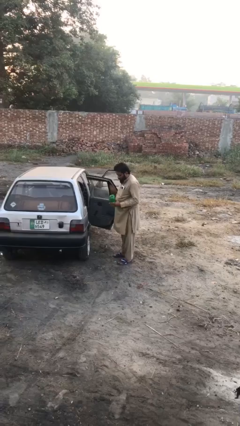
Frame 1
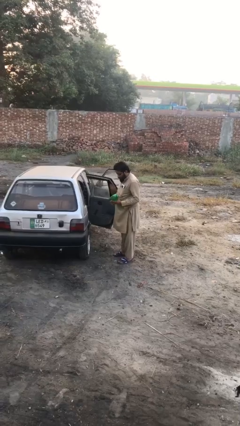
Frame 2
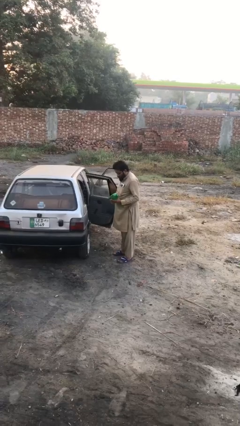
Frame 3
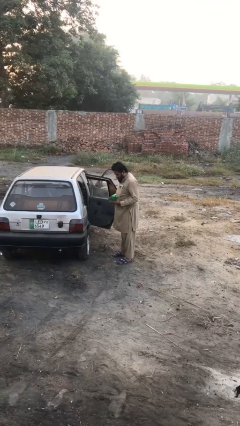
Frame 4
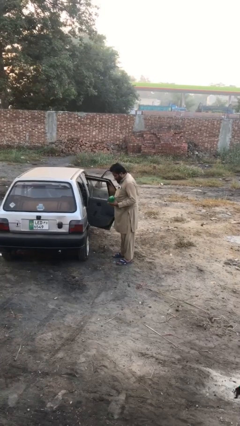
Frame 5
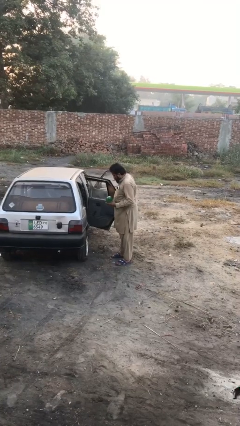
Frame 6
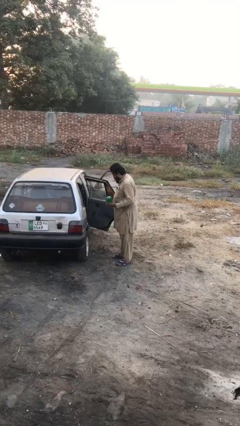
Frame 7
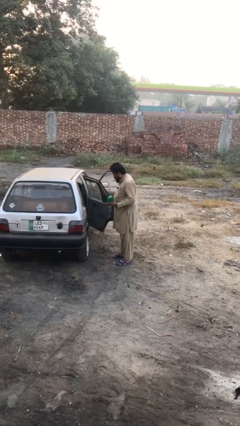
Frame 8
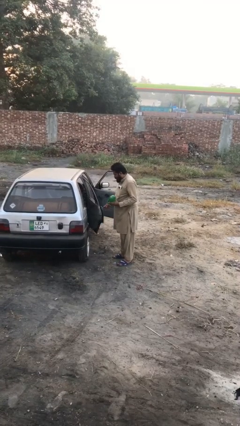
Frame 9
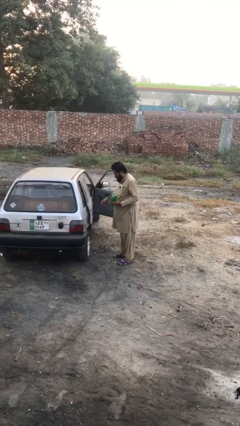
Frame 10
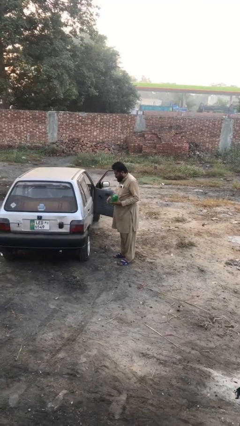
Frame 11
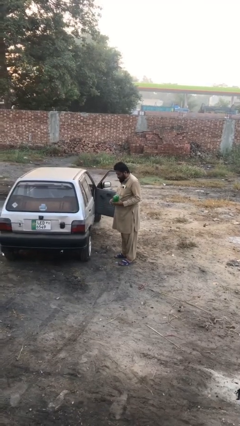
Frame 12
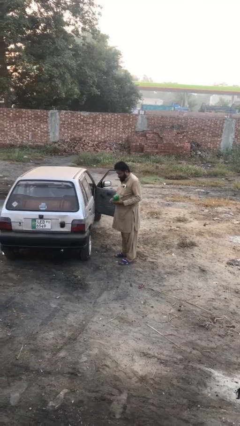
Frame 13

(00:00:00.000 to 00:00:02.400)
person closes car door

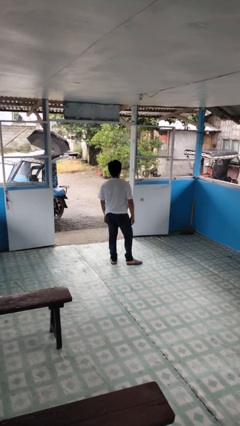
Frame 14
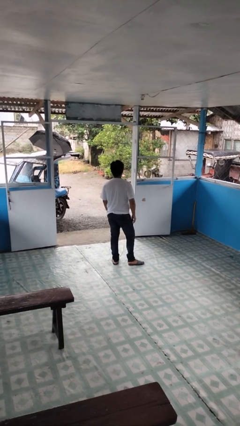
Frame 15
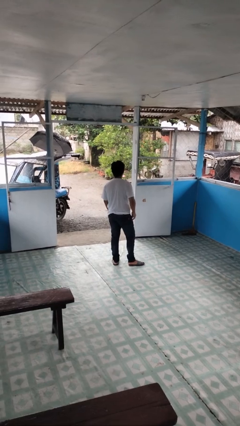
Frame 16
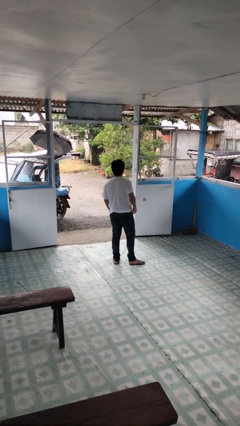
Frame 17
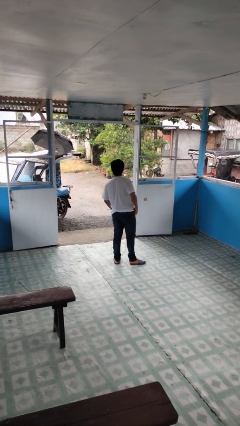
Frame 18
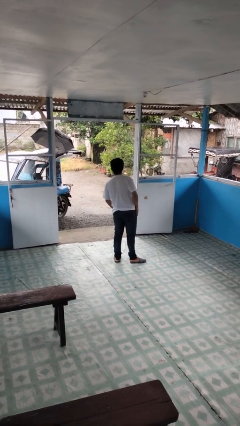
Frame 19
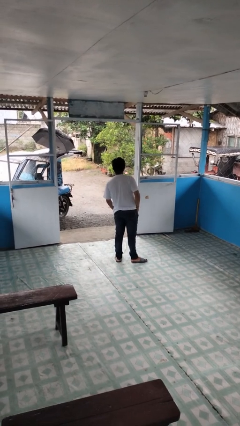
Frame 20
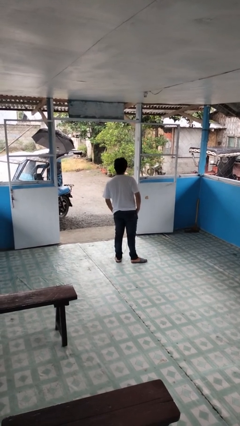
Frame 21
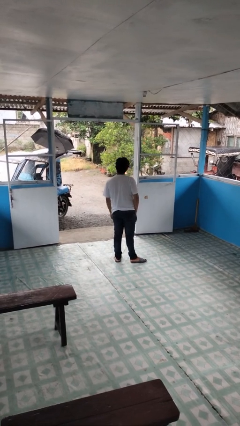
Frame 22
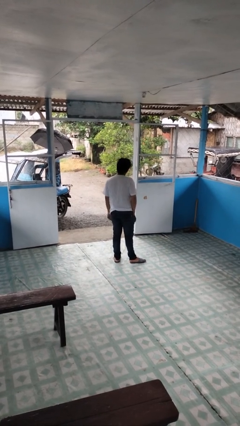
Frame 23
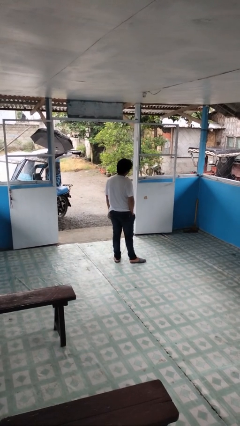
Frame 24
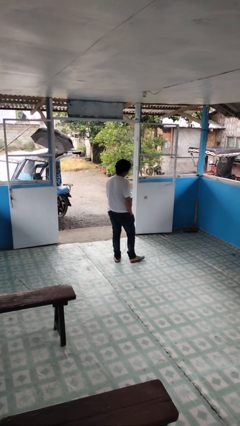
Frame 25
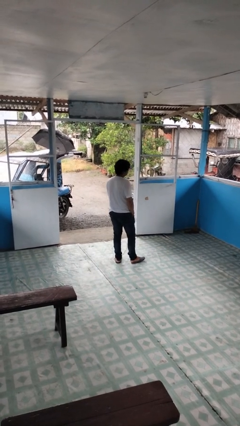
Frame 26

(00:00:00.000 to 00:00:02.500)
person puts hands in back pockets

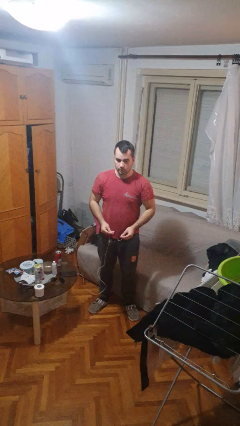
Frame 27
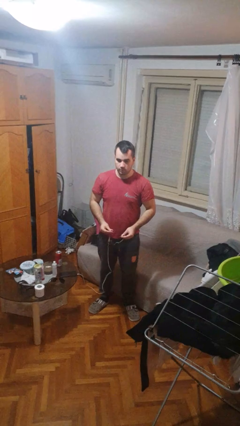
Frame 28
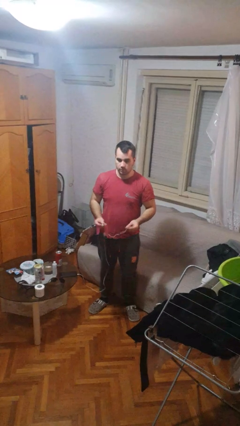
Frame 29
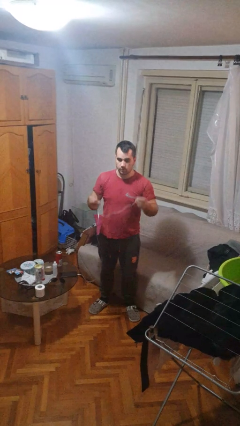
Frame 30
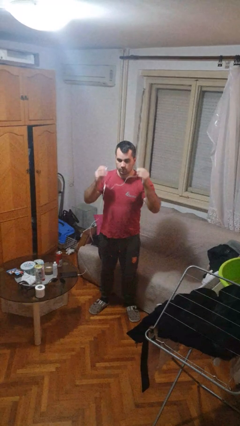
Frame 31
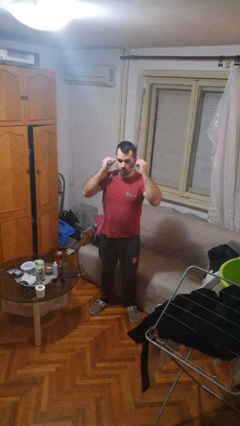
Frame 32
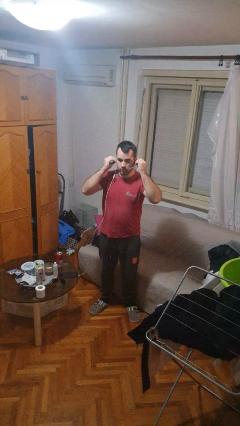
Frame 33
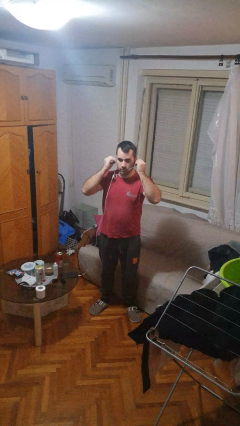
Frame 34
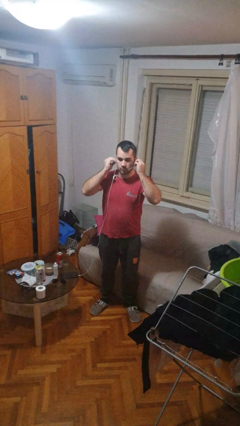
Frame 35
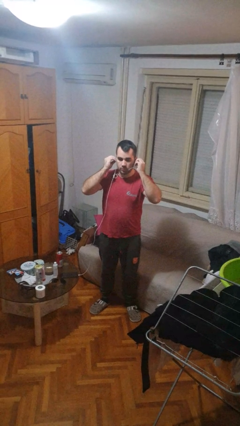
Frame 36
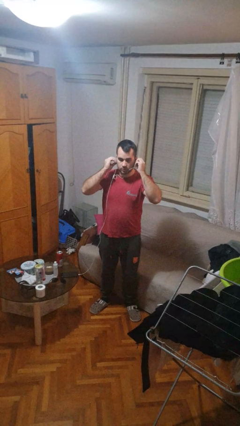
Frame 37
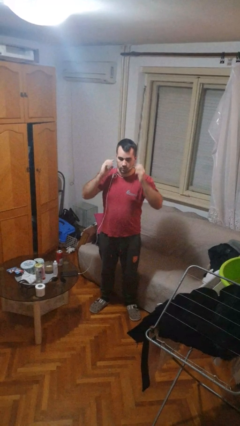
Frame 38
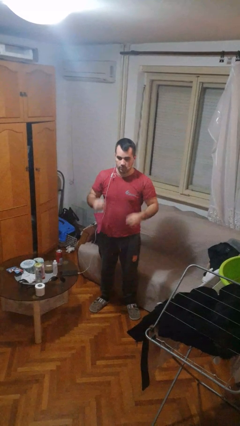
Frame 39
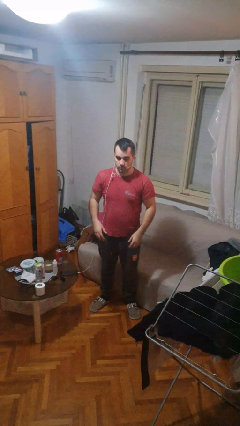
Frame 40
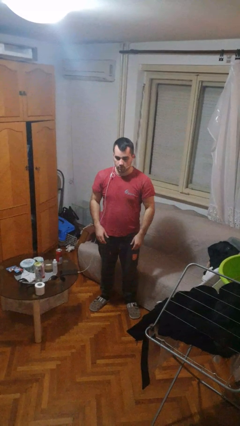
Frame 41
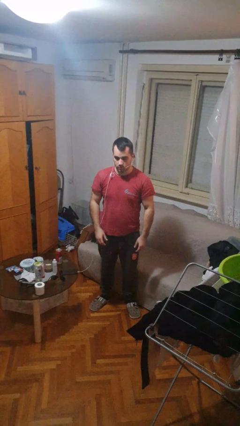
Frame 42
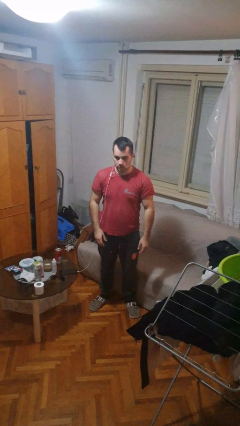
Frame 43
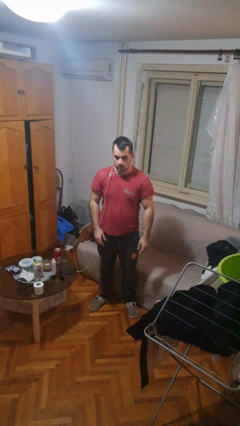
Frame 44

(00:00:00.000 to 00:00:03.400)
person puts on headphones

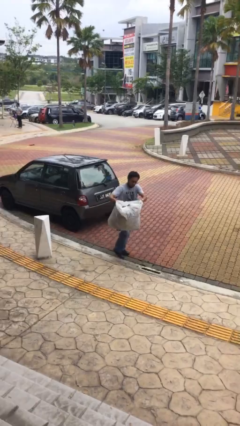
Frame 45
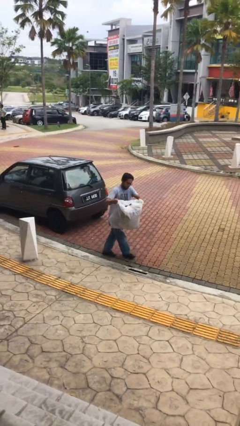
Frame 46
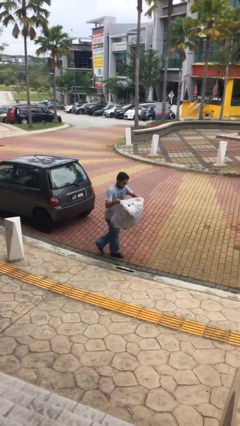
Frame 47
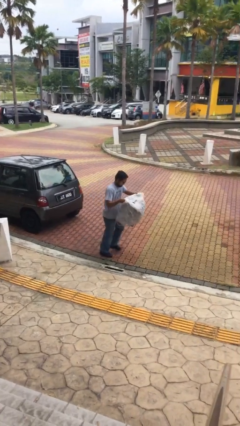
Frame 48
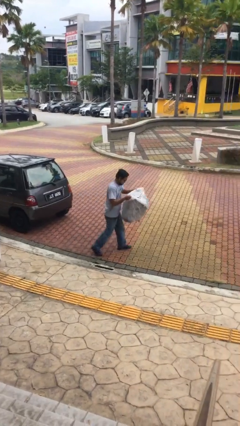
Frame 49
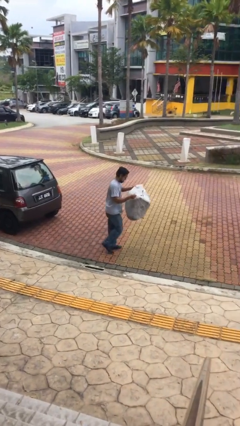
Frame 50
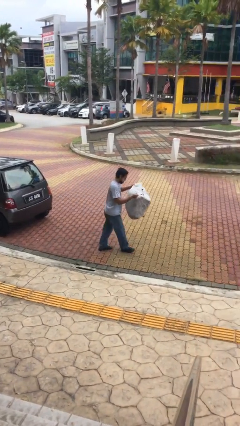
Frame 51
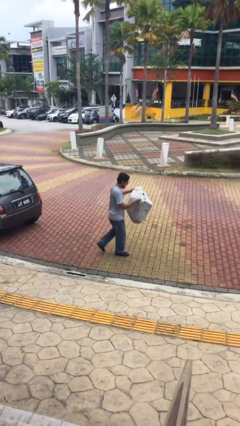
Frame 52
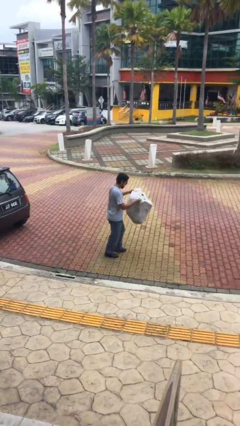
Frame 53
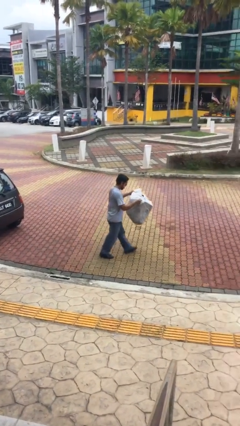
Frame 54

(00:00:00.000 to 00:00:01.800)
person carries heavy object

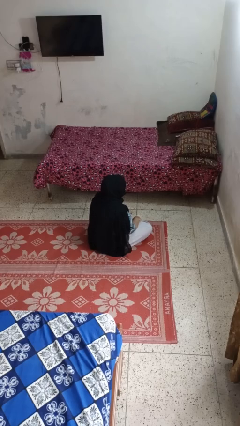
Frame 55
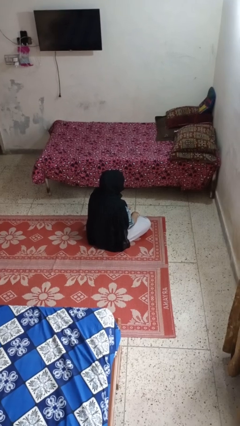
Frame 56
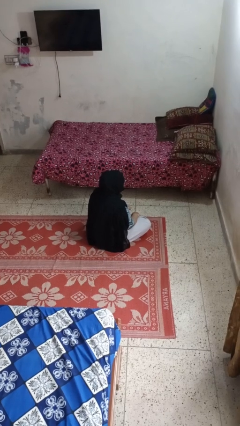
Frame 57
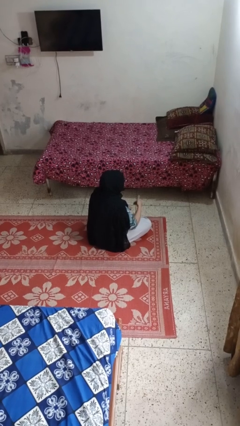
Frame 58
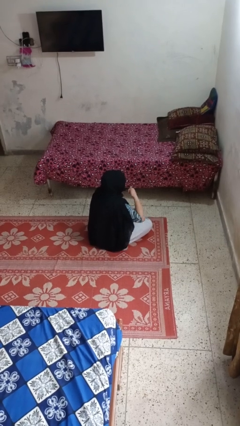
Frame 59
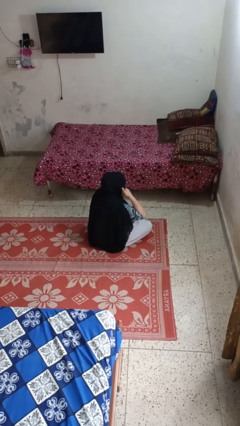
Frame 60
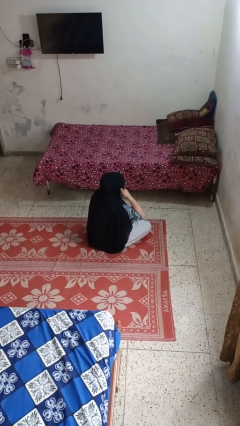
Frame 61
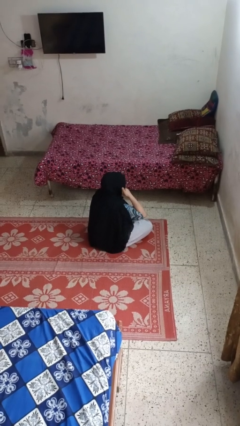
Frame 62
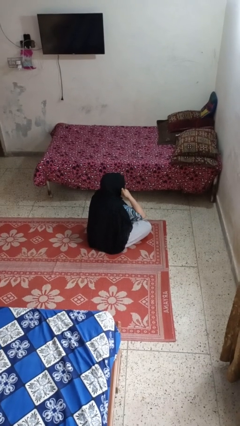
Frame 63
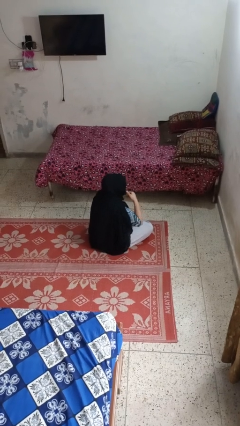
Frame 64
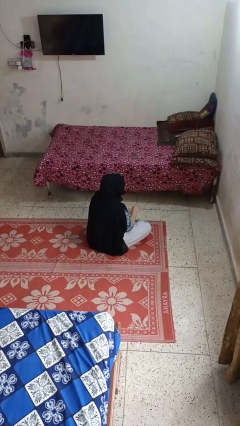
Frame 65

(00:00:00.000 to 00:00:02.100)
person gestures call me

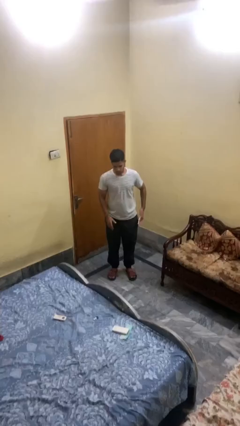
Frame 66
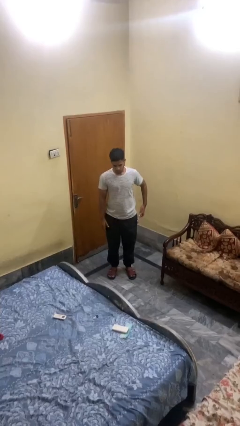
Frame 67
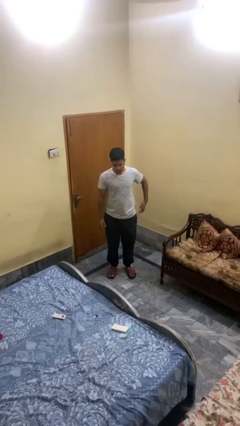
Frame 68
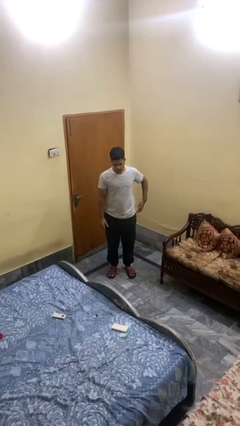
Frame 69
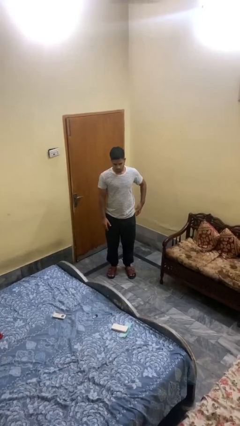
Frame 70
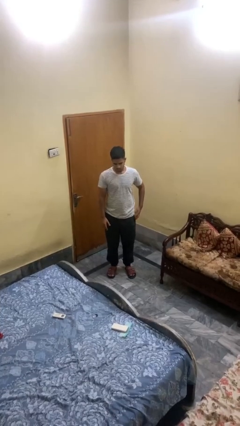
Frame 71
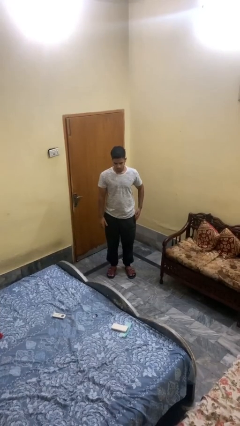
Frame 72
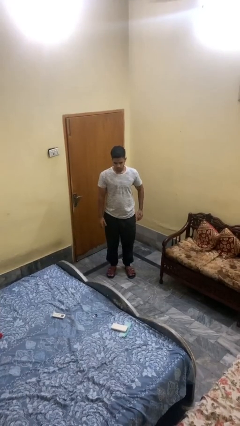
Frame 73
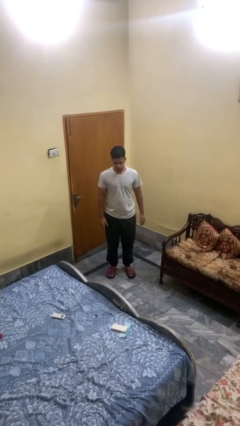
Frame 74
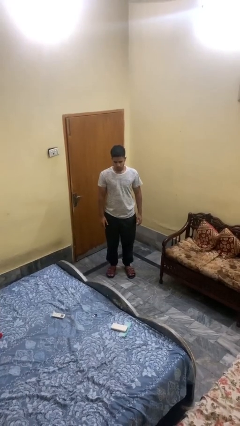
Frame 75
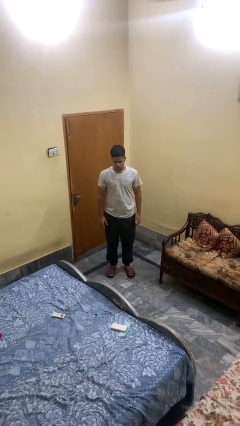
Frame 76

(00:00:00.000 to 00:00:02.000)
person puts phone into pocket

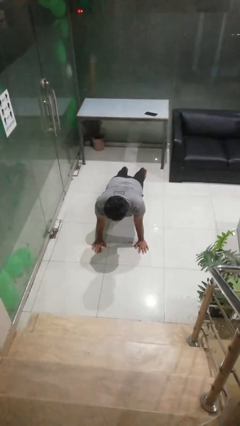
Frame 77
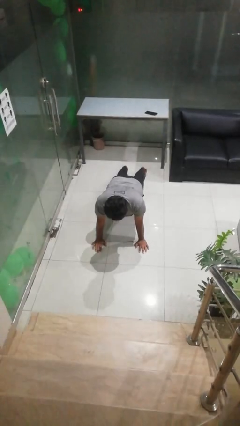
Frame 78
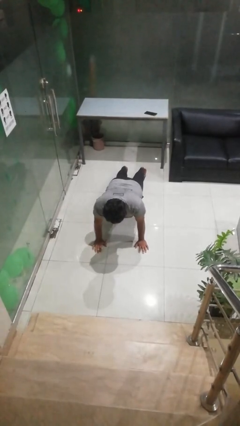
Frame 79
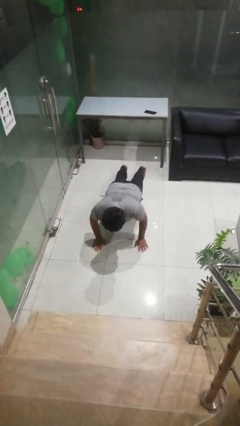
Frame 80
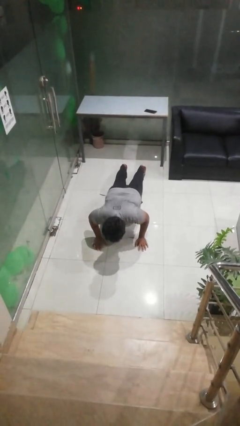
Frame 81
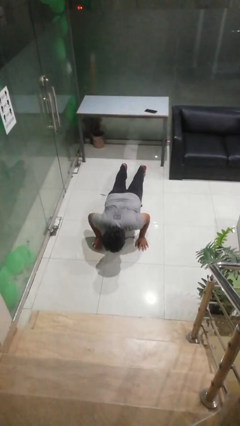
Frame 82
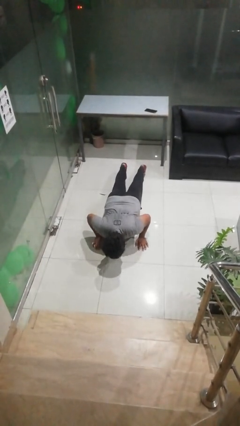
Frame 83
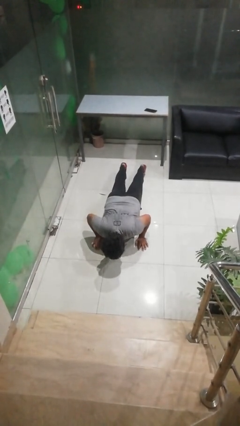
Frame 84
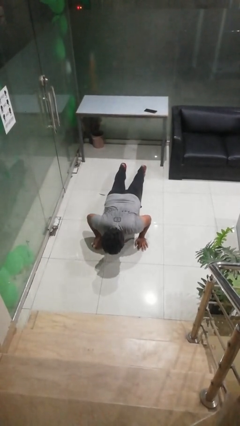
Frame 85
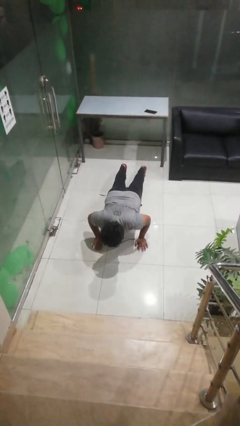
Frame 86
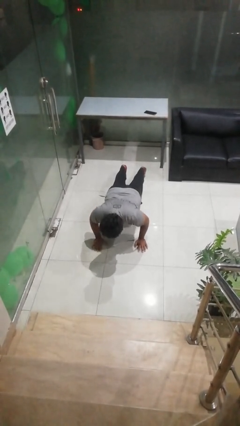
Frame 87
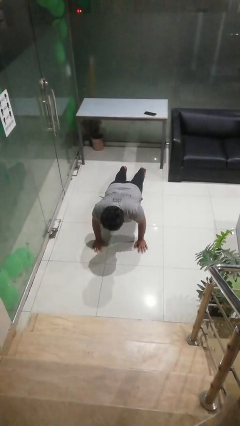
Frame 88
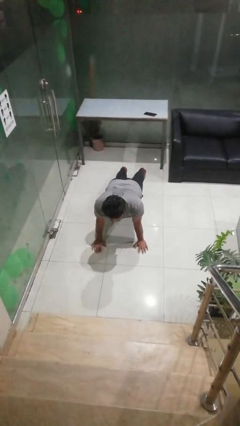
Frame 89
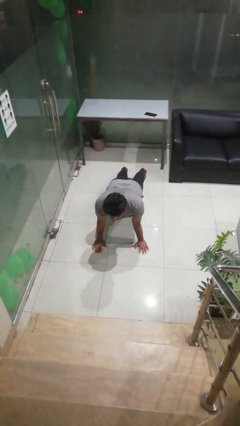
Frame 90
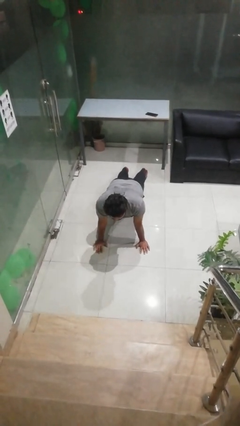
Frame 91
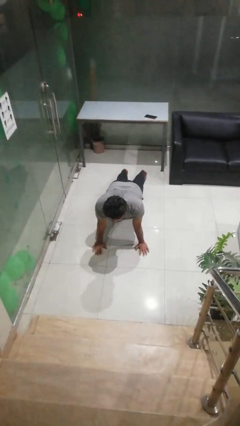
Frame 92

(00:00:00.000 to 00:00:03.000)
person exercises with pushup

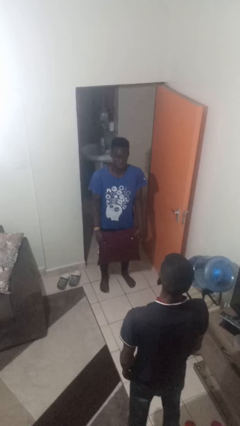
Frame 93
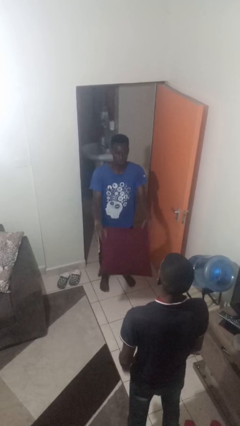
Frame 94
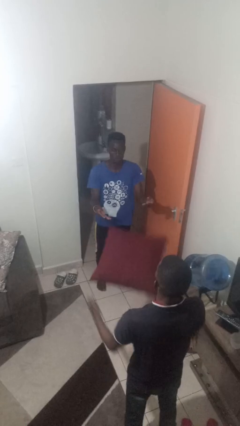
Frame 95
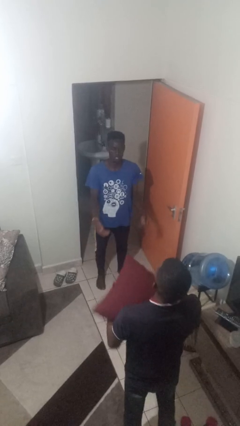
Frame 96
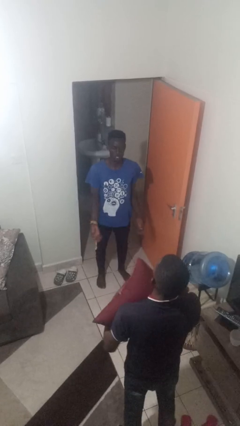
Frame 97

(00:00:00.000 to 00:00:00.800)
person throws object to person
